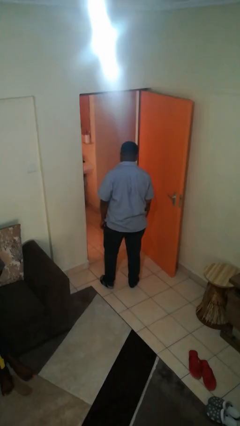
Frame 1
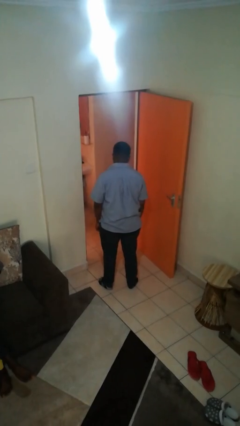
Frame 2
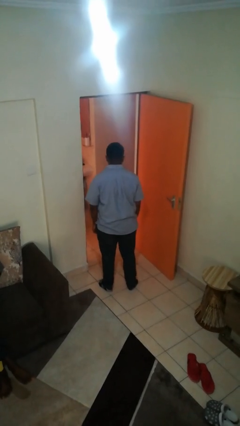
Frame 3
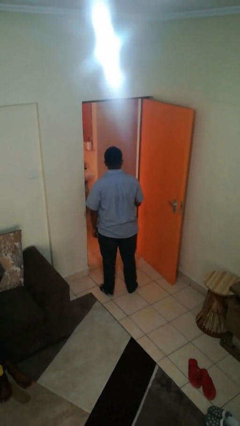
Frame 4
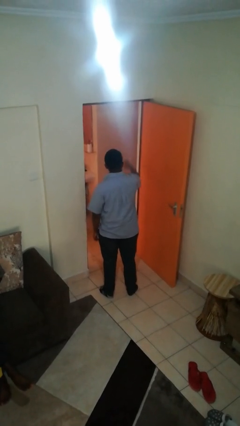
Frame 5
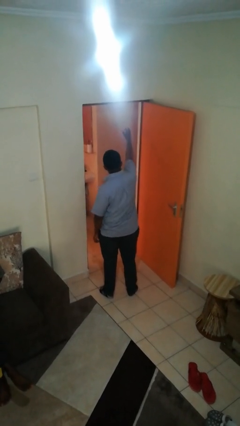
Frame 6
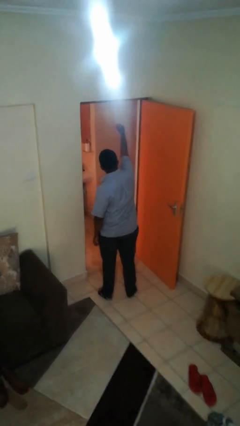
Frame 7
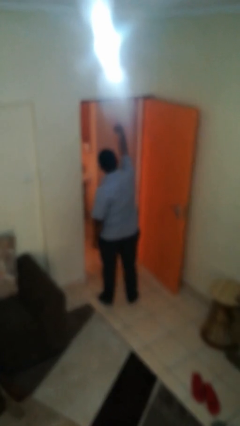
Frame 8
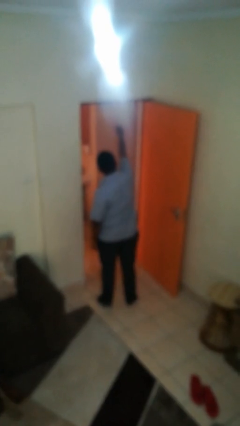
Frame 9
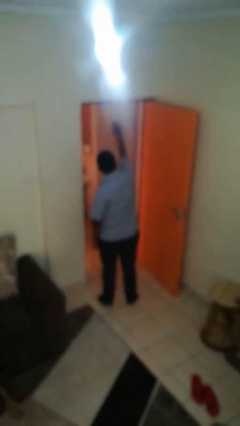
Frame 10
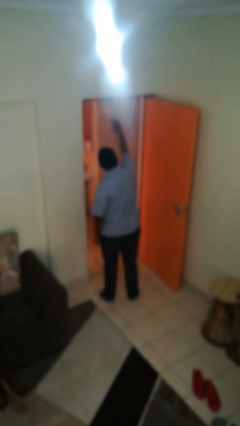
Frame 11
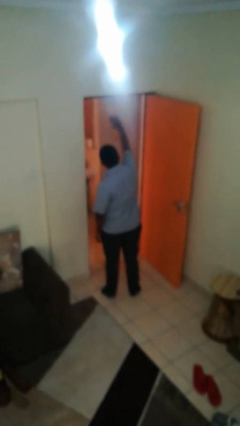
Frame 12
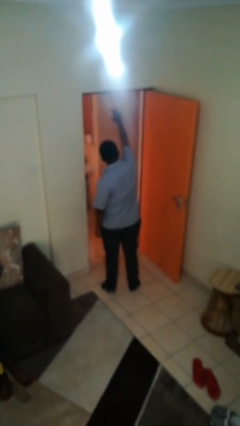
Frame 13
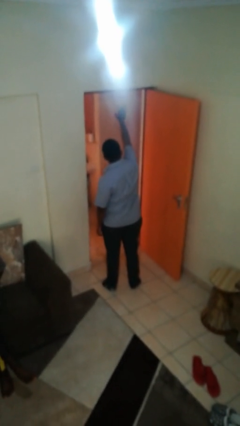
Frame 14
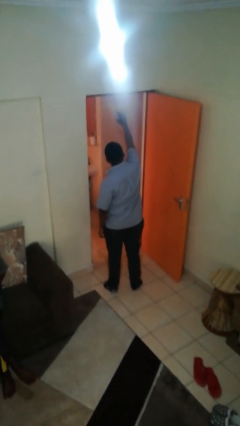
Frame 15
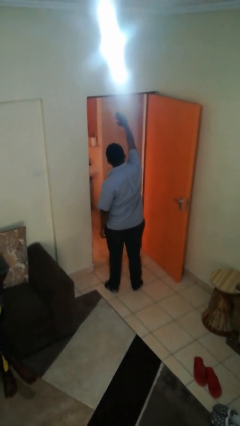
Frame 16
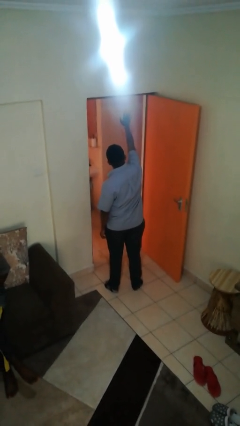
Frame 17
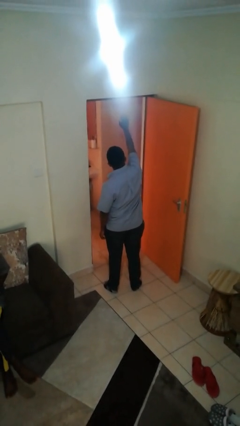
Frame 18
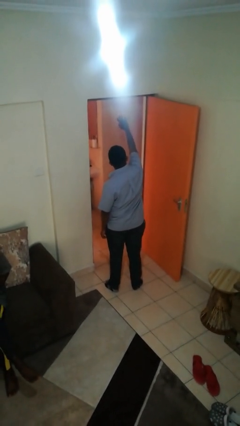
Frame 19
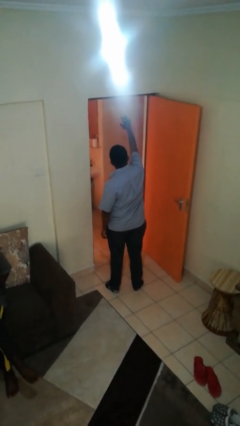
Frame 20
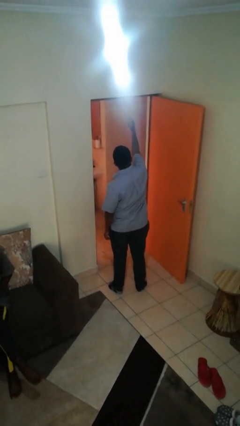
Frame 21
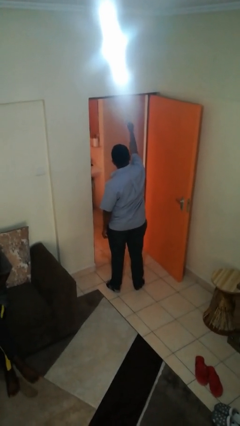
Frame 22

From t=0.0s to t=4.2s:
person waves at person

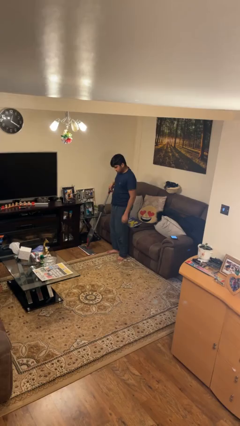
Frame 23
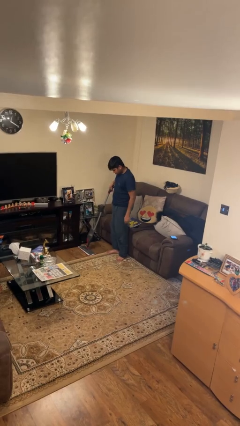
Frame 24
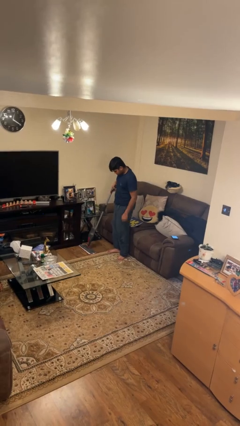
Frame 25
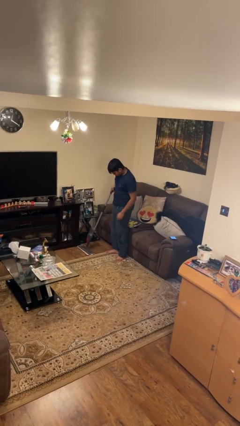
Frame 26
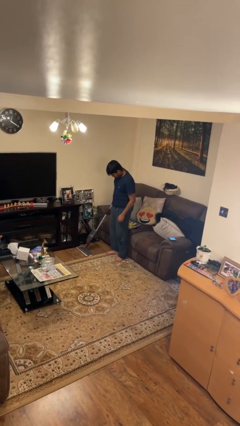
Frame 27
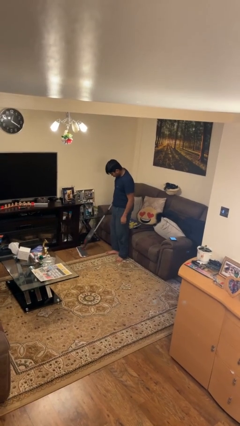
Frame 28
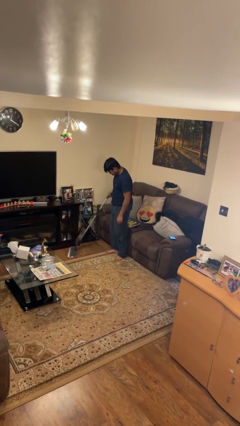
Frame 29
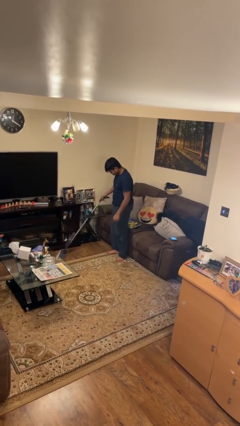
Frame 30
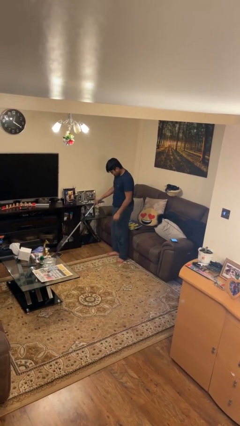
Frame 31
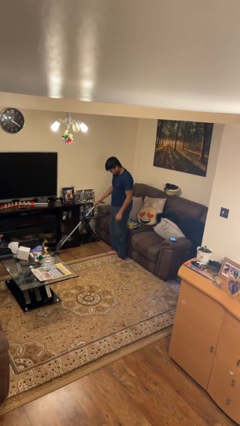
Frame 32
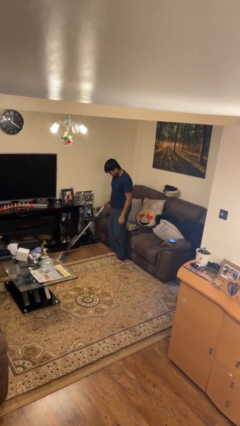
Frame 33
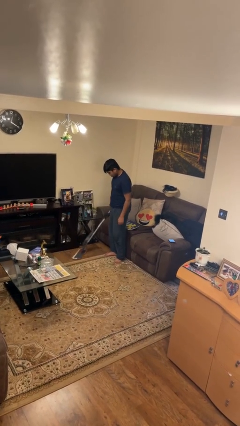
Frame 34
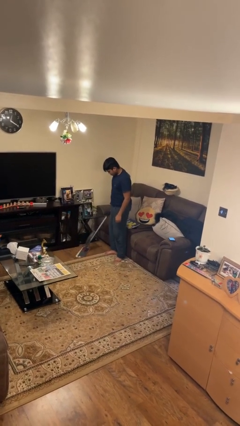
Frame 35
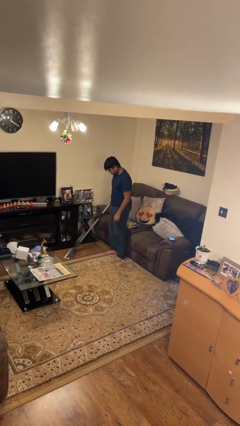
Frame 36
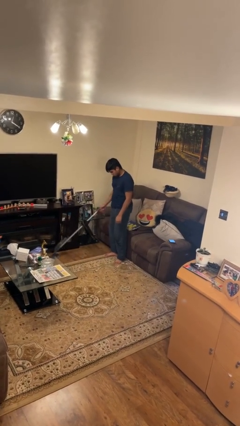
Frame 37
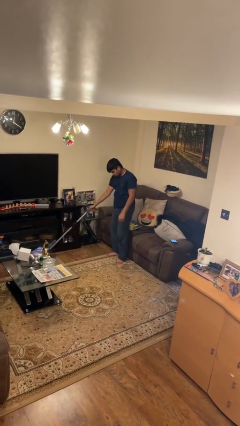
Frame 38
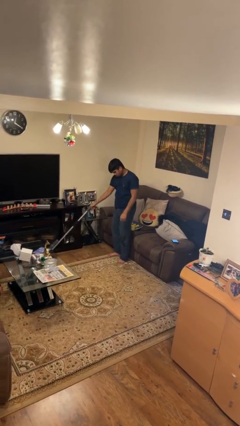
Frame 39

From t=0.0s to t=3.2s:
person mops

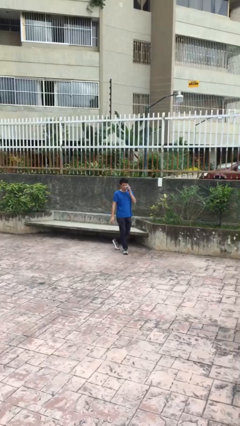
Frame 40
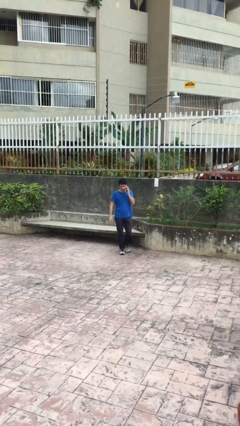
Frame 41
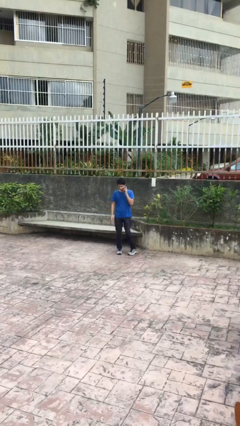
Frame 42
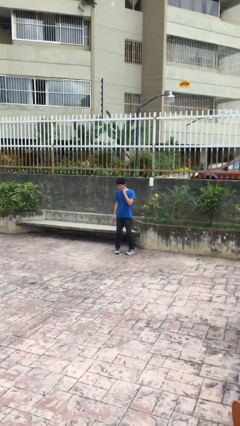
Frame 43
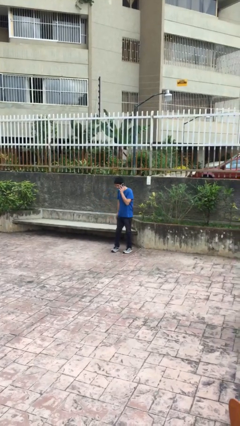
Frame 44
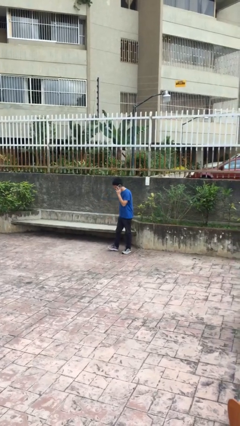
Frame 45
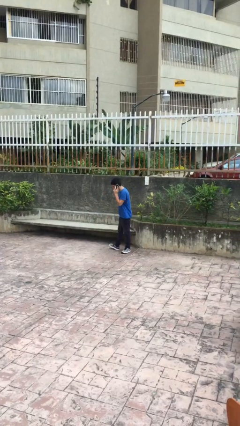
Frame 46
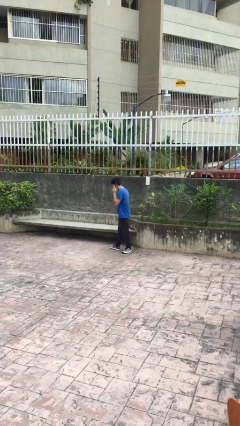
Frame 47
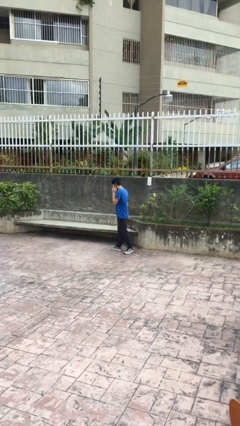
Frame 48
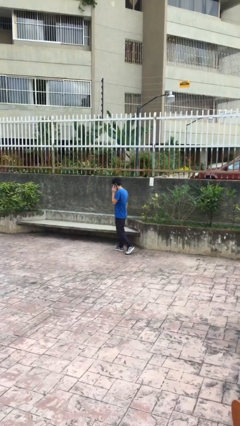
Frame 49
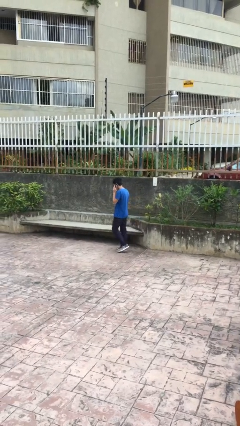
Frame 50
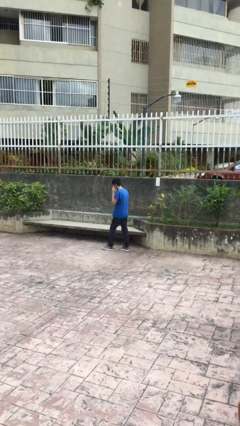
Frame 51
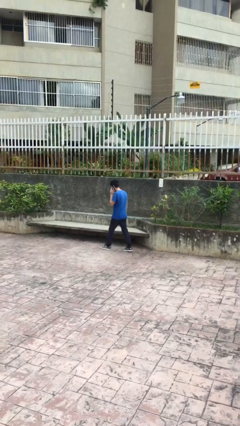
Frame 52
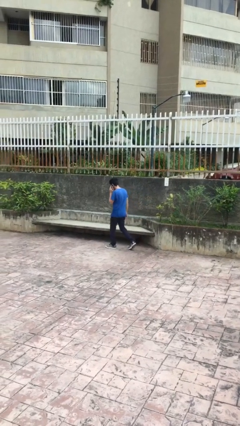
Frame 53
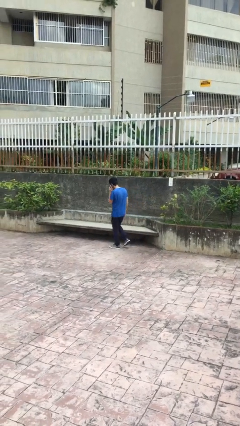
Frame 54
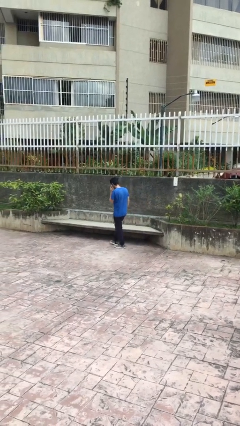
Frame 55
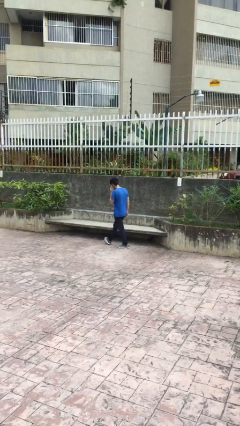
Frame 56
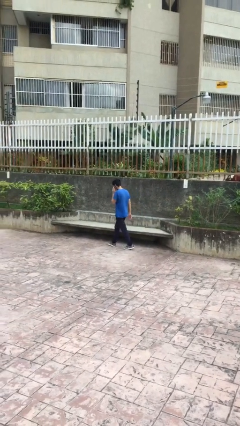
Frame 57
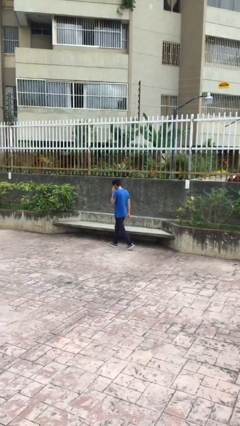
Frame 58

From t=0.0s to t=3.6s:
person talks on phone

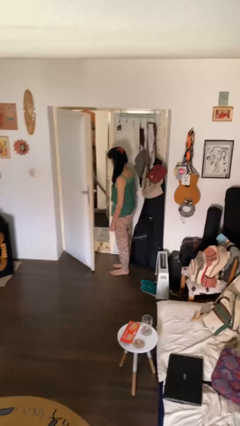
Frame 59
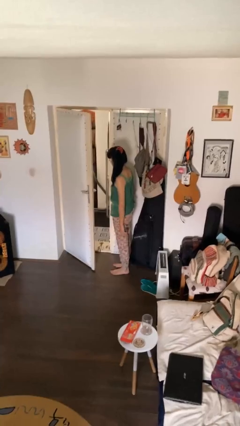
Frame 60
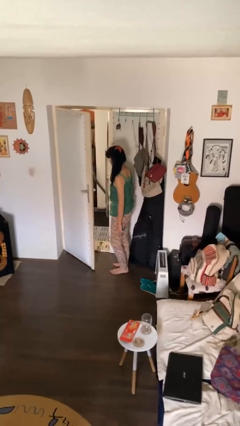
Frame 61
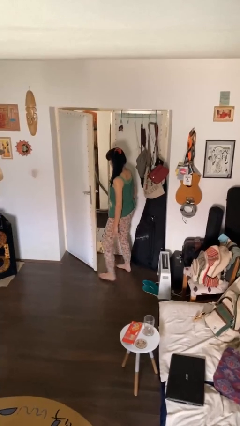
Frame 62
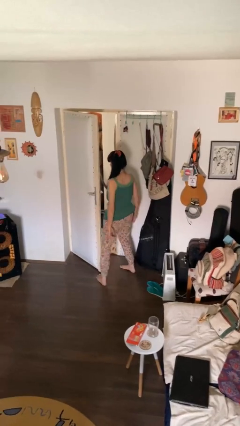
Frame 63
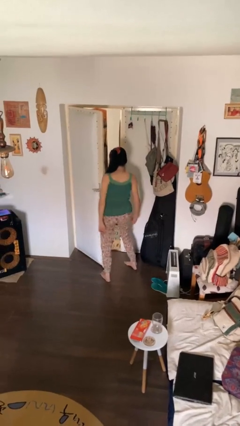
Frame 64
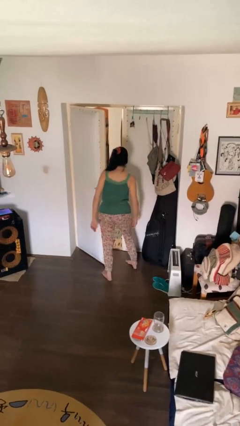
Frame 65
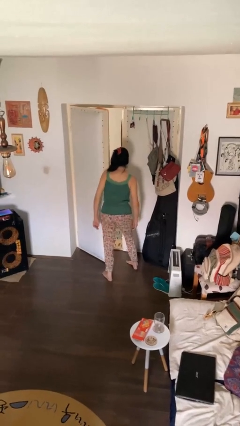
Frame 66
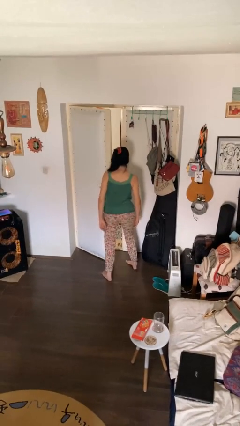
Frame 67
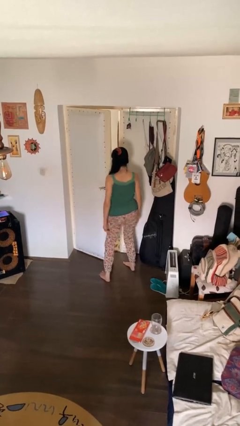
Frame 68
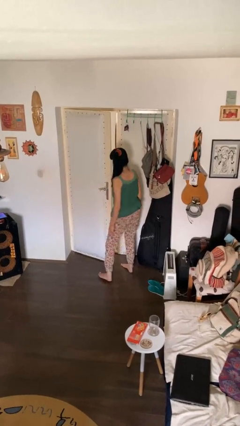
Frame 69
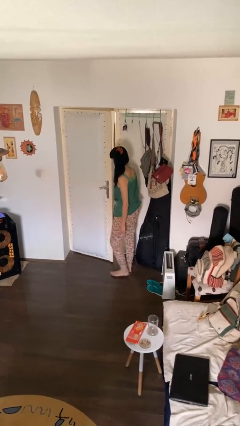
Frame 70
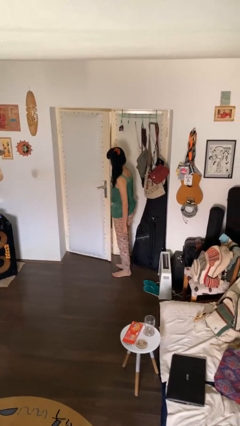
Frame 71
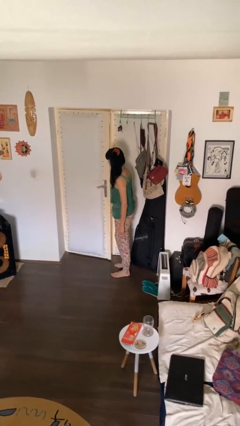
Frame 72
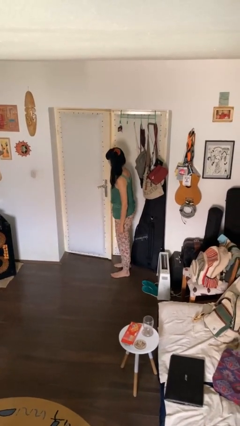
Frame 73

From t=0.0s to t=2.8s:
person closes door with hip

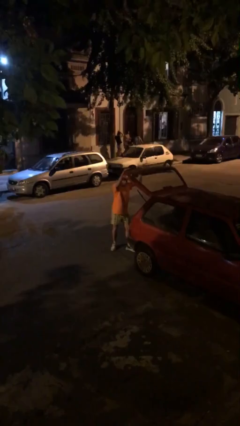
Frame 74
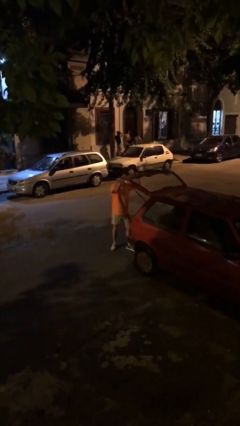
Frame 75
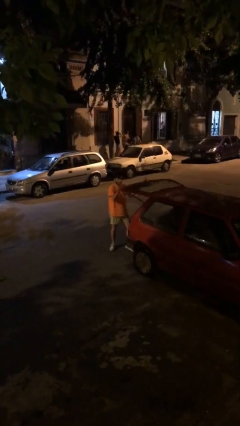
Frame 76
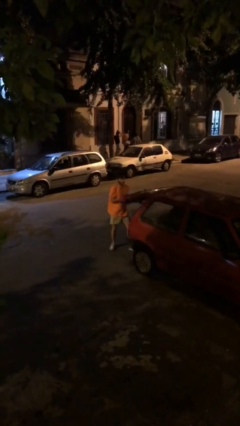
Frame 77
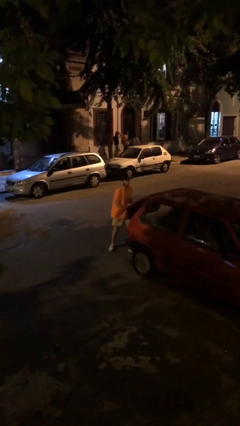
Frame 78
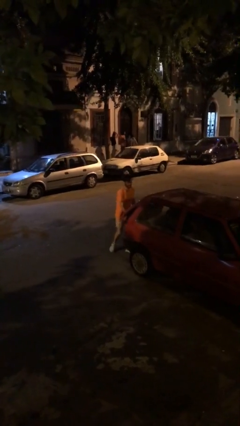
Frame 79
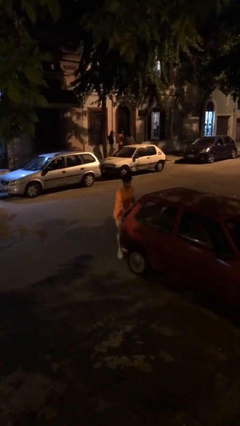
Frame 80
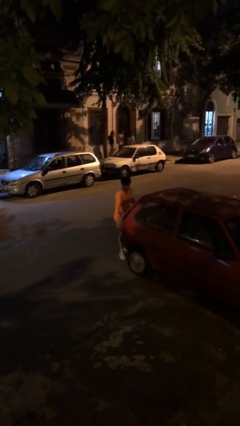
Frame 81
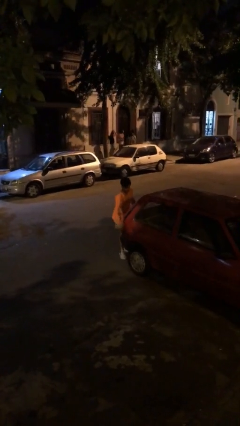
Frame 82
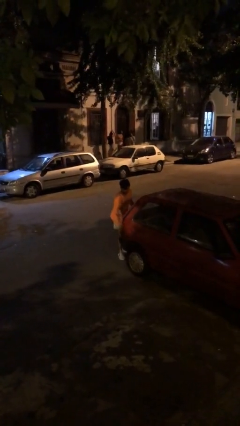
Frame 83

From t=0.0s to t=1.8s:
person closes car trunk

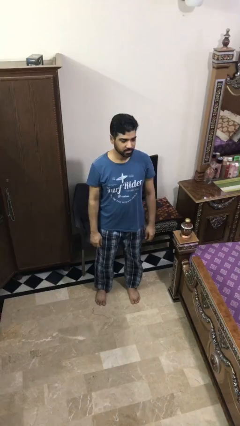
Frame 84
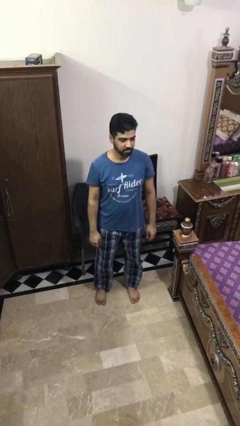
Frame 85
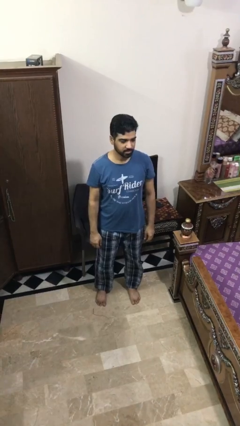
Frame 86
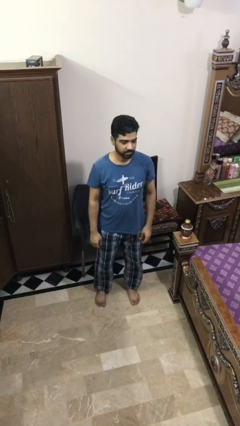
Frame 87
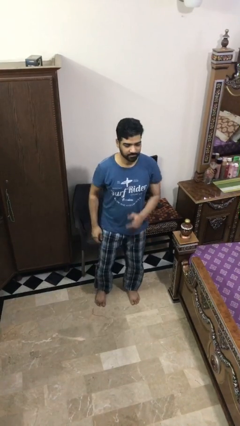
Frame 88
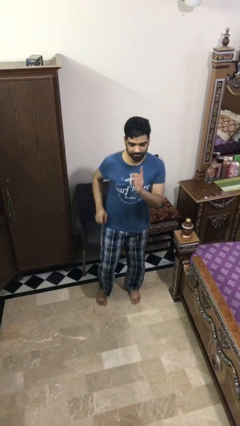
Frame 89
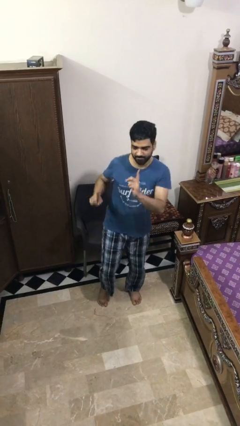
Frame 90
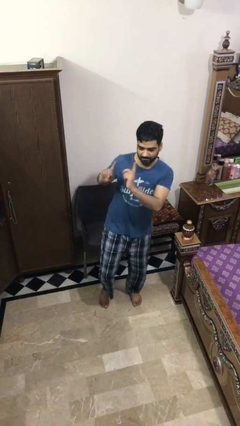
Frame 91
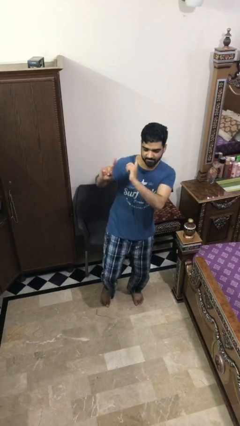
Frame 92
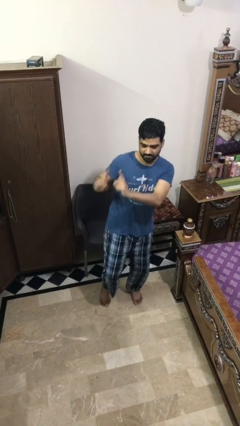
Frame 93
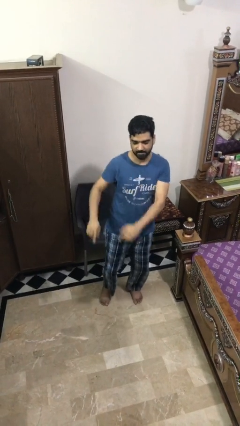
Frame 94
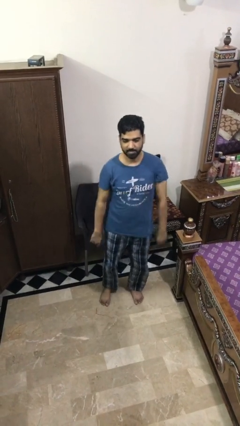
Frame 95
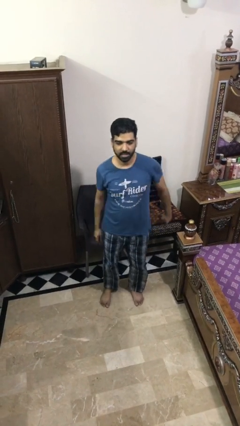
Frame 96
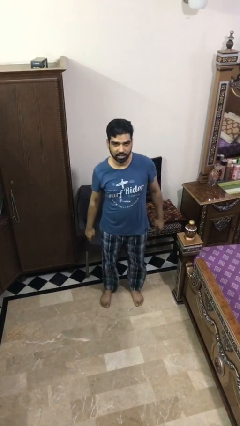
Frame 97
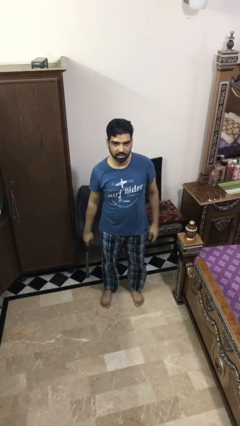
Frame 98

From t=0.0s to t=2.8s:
person dances in place
